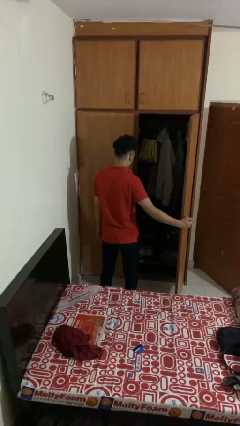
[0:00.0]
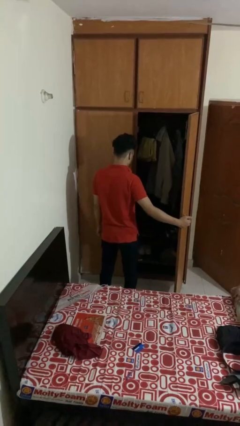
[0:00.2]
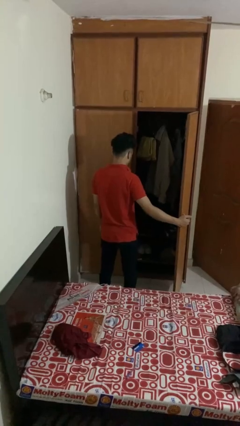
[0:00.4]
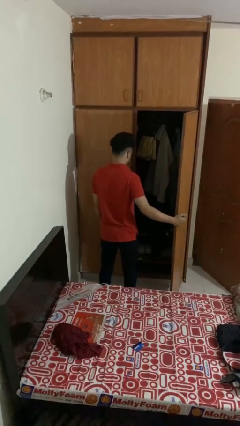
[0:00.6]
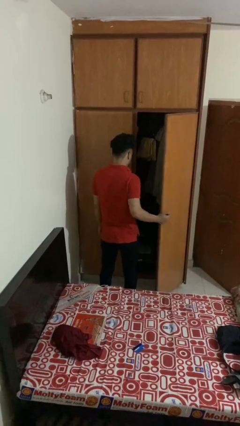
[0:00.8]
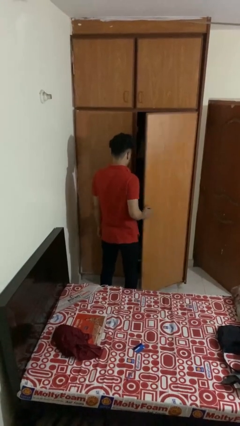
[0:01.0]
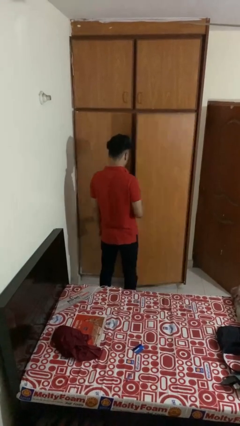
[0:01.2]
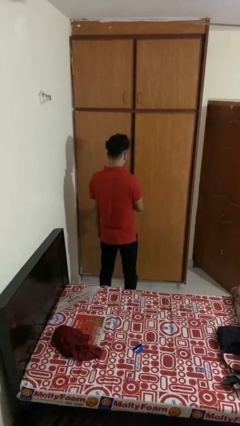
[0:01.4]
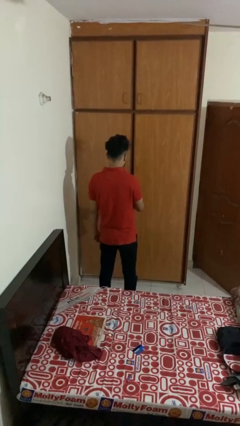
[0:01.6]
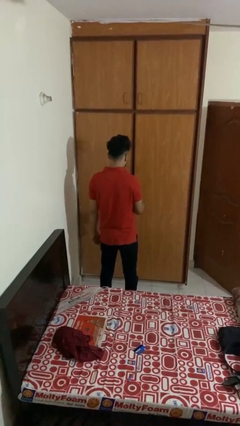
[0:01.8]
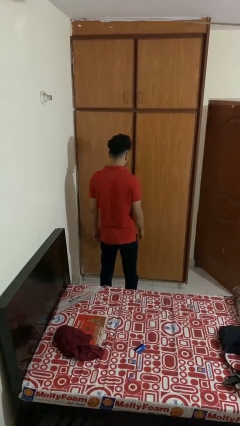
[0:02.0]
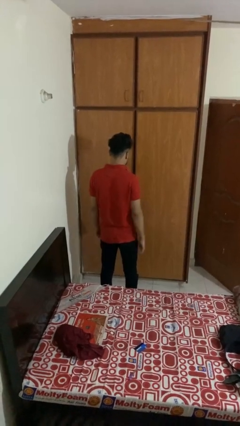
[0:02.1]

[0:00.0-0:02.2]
person closes closet door

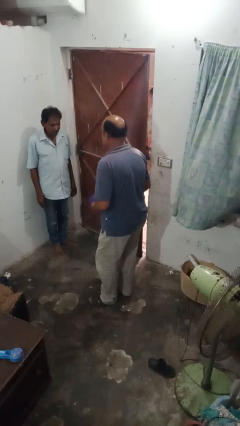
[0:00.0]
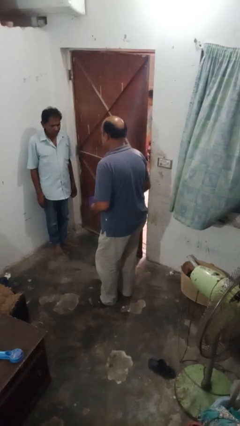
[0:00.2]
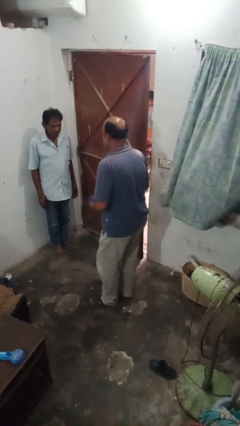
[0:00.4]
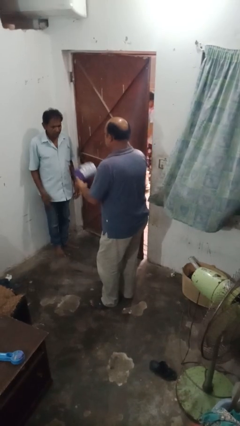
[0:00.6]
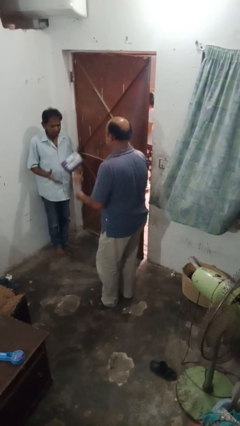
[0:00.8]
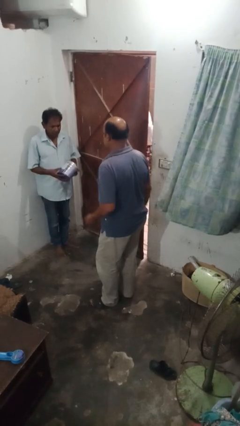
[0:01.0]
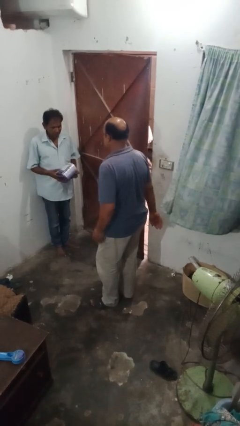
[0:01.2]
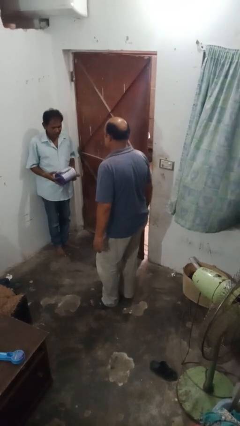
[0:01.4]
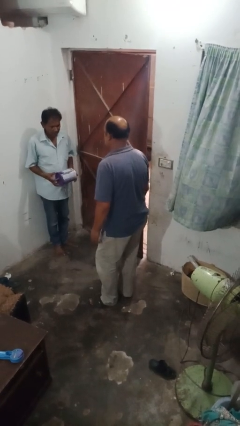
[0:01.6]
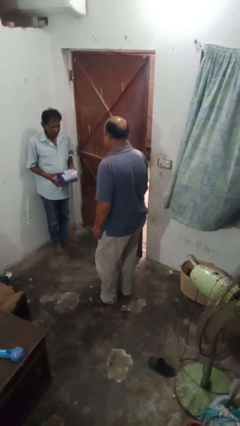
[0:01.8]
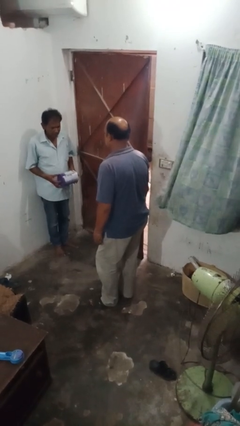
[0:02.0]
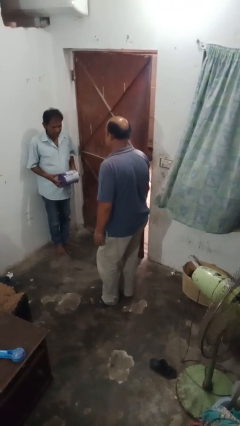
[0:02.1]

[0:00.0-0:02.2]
person throws object to person

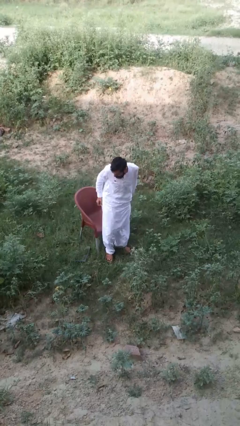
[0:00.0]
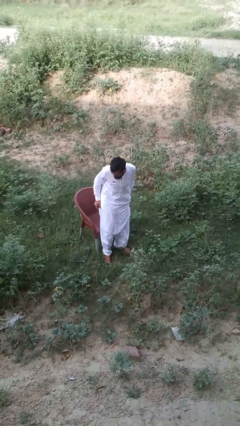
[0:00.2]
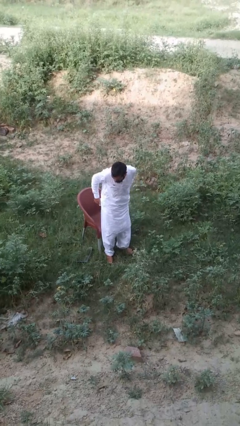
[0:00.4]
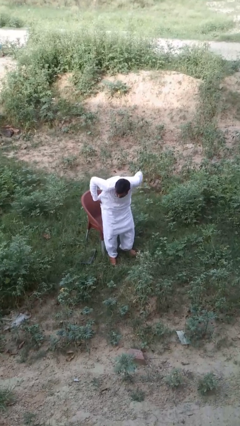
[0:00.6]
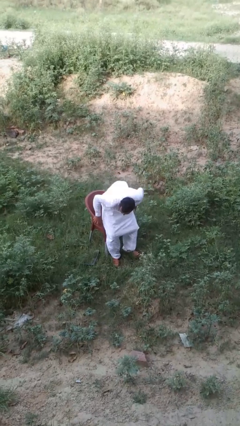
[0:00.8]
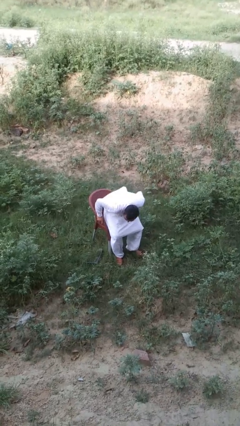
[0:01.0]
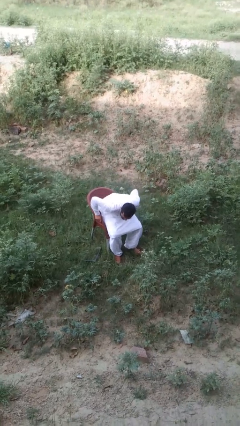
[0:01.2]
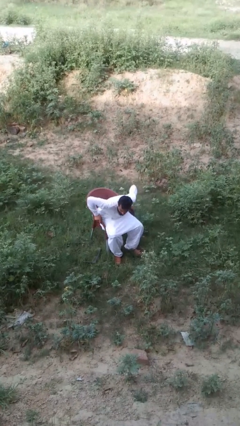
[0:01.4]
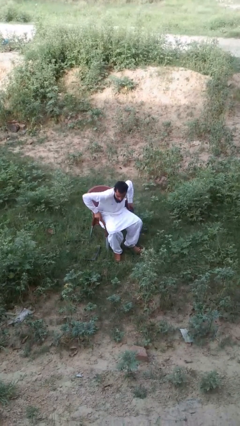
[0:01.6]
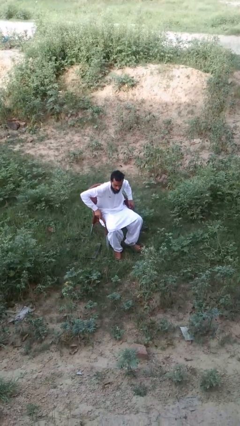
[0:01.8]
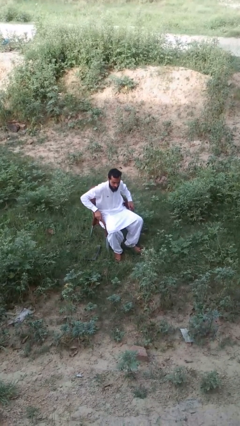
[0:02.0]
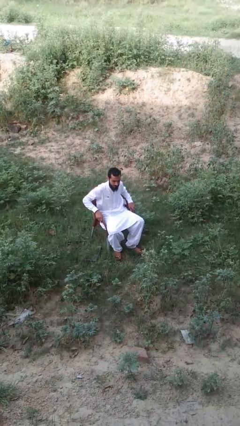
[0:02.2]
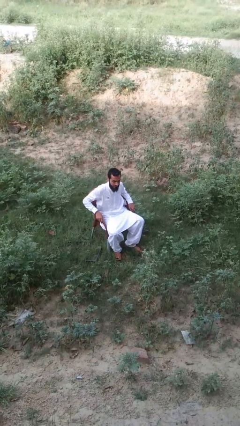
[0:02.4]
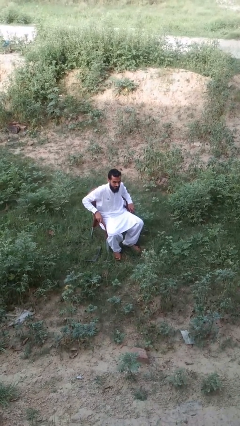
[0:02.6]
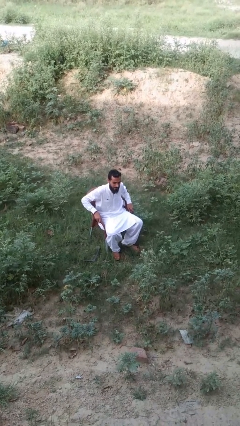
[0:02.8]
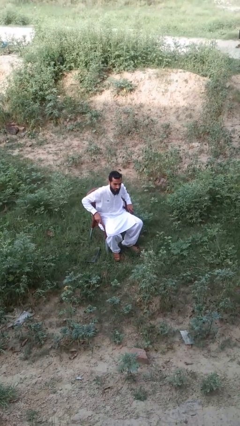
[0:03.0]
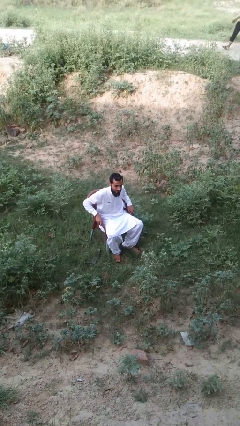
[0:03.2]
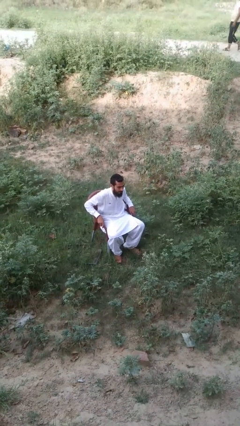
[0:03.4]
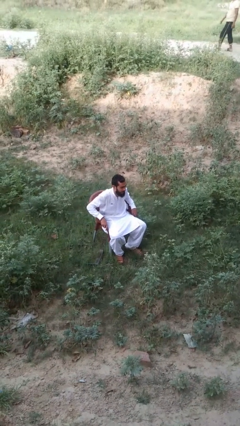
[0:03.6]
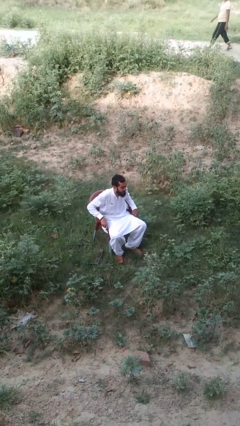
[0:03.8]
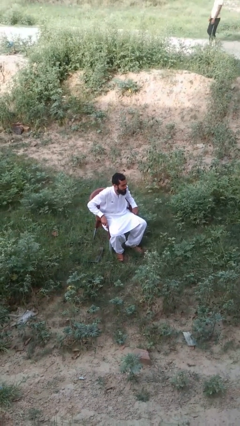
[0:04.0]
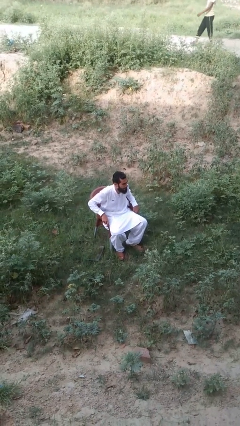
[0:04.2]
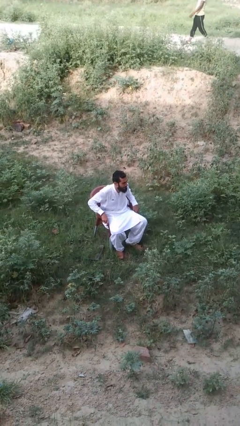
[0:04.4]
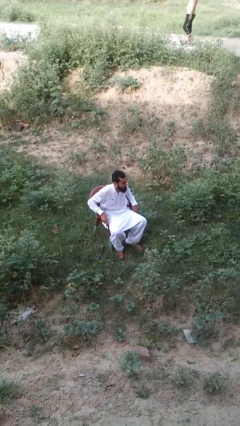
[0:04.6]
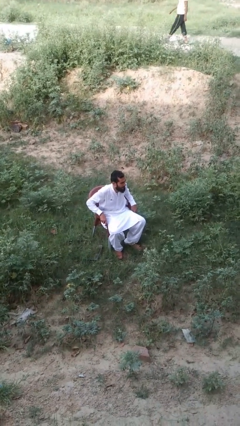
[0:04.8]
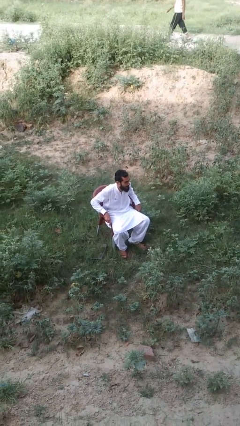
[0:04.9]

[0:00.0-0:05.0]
person sits down

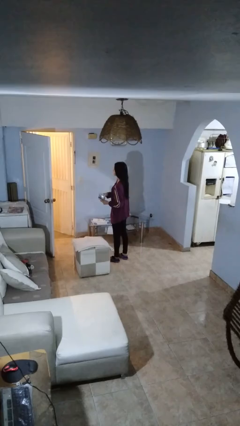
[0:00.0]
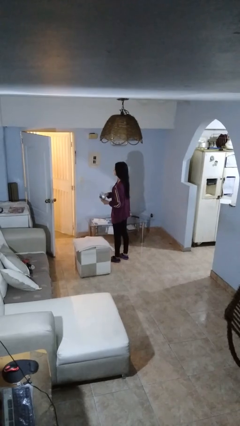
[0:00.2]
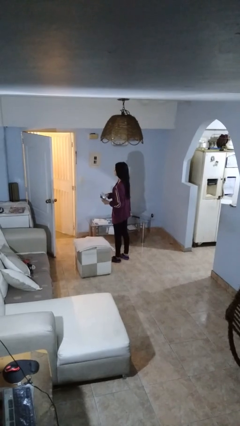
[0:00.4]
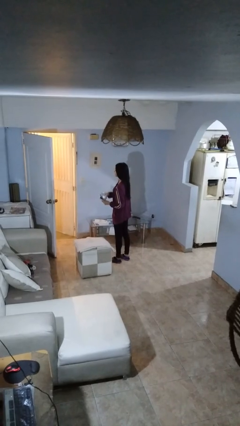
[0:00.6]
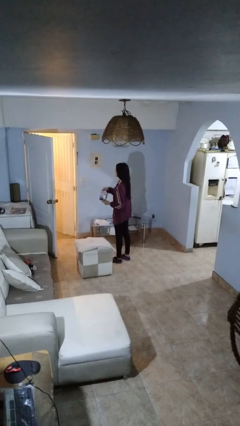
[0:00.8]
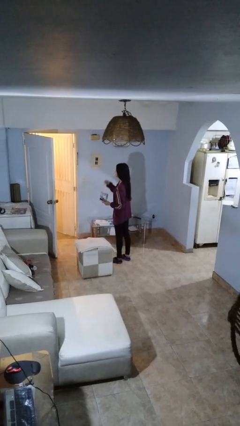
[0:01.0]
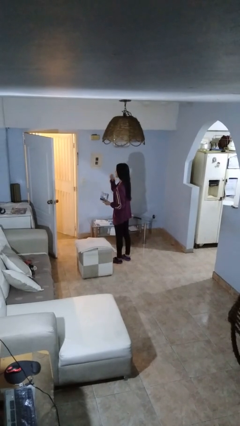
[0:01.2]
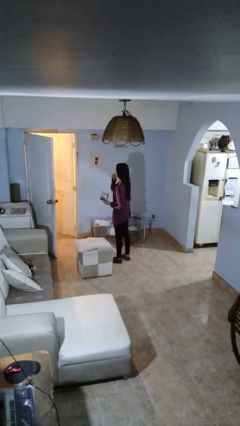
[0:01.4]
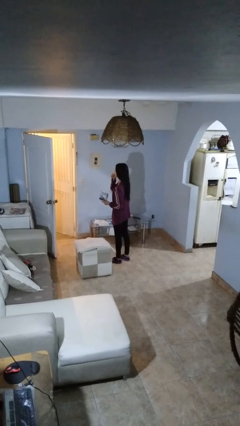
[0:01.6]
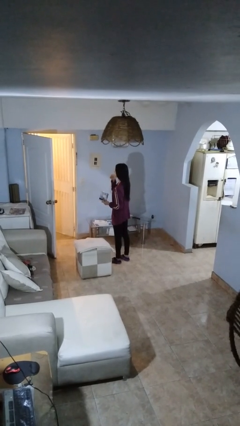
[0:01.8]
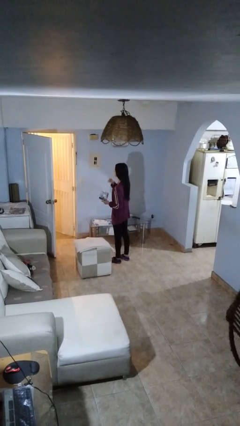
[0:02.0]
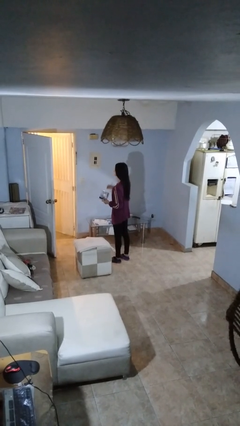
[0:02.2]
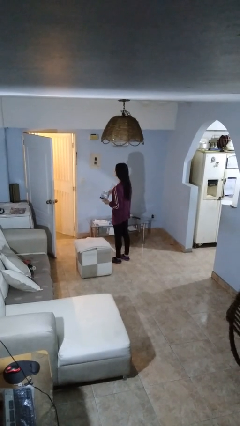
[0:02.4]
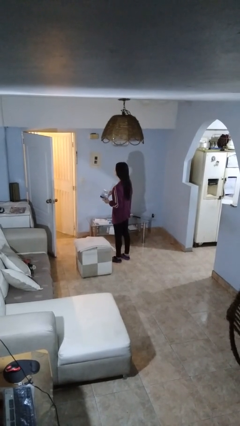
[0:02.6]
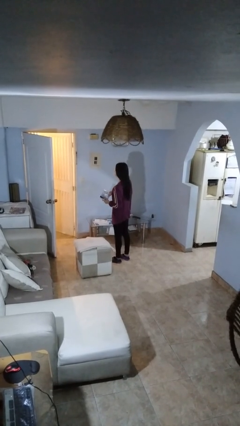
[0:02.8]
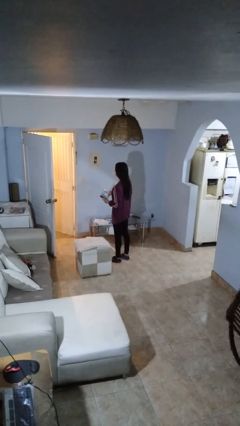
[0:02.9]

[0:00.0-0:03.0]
person eats snack from bag

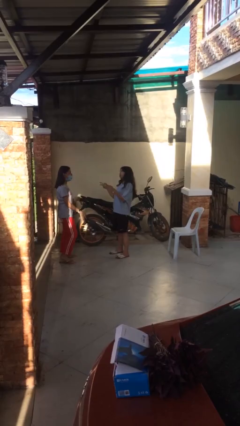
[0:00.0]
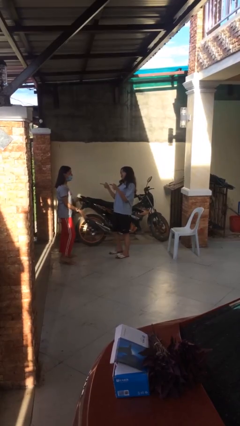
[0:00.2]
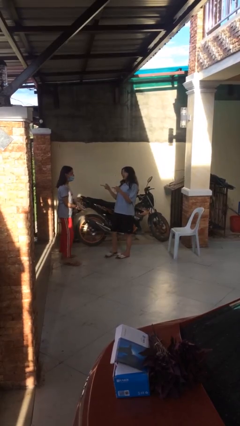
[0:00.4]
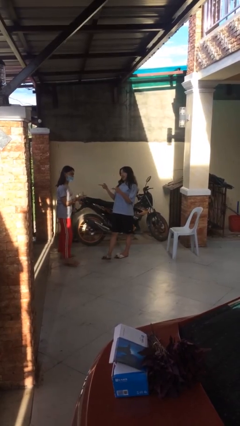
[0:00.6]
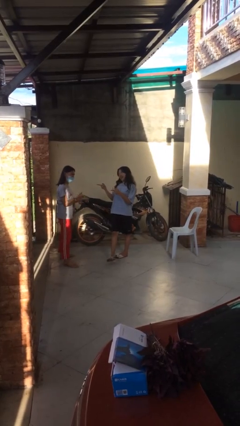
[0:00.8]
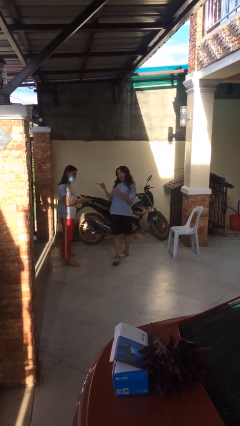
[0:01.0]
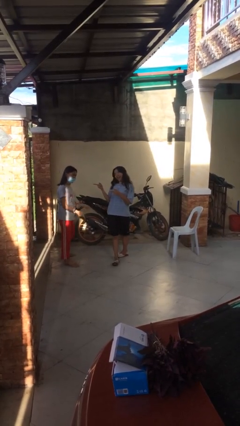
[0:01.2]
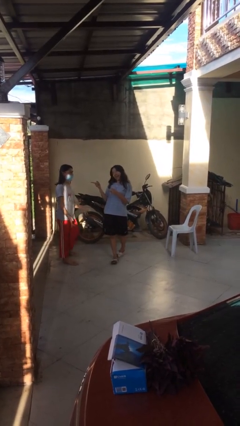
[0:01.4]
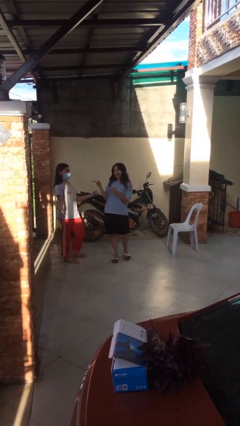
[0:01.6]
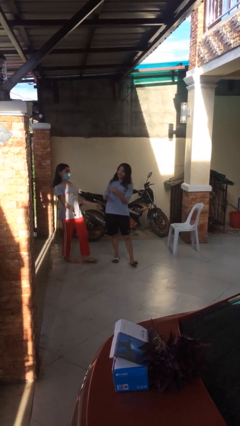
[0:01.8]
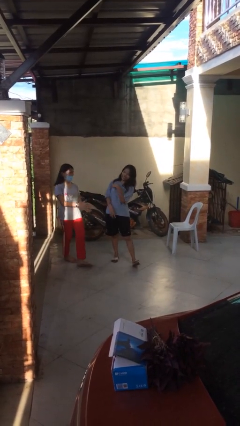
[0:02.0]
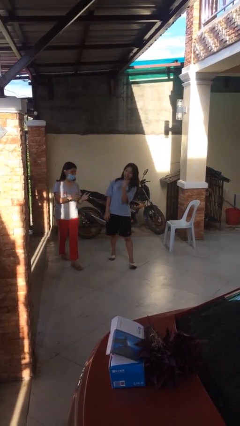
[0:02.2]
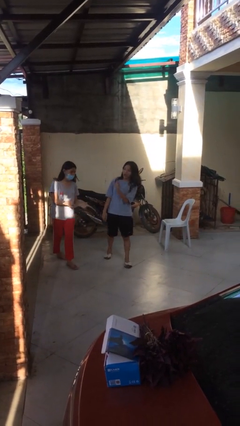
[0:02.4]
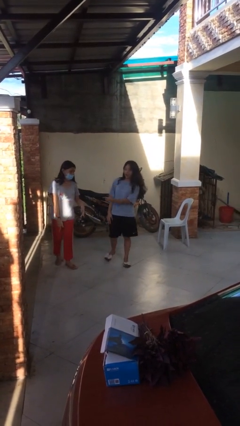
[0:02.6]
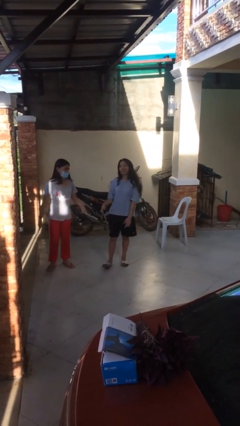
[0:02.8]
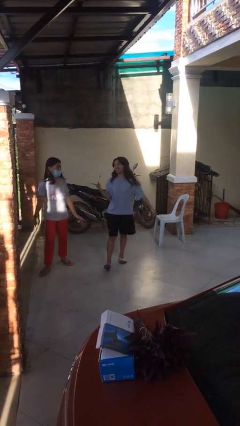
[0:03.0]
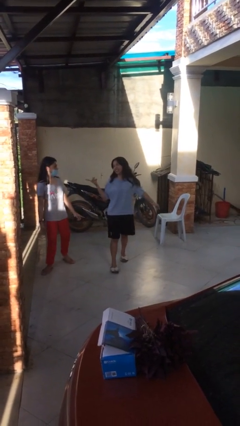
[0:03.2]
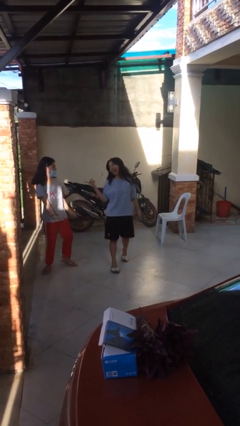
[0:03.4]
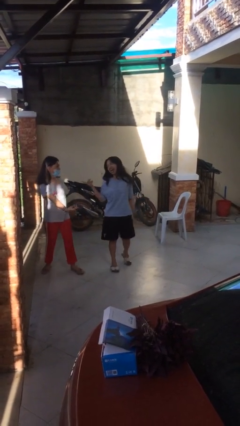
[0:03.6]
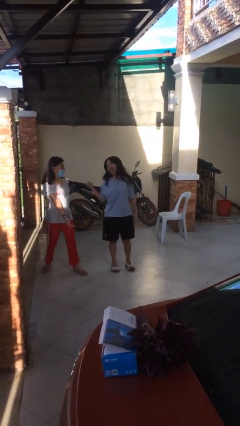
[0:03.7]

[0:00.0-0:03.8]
person talks to person

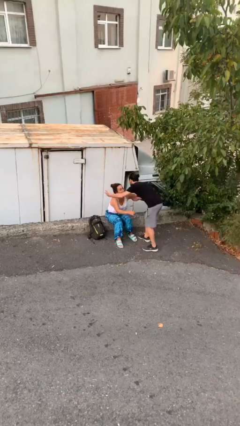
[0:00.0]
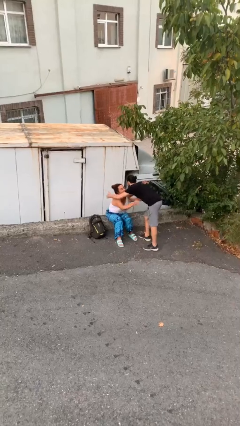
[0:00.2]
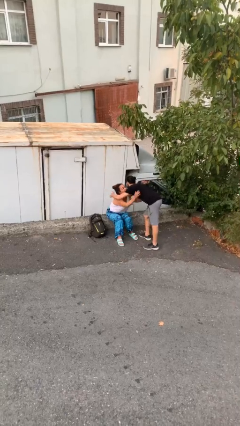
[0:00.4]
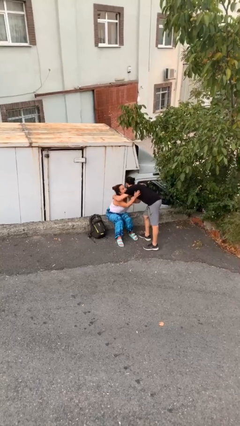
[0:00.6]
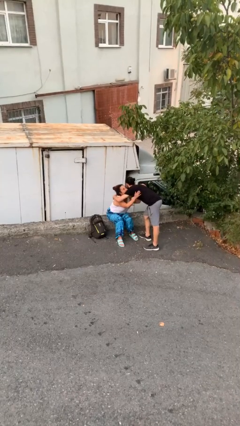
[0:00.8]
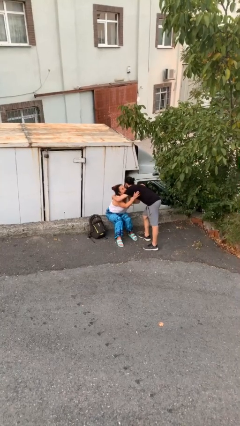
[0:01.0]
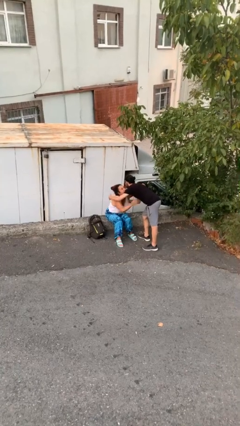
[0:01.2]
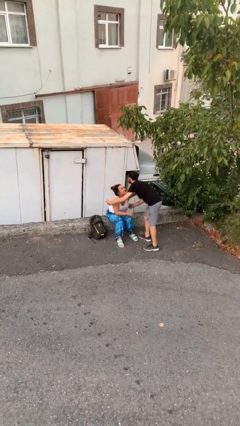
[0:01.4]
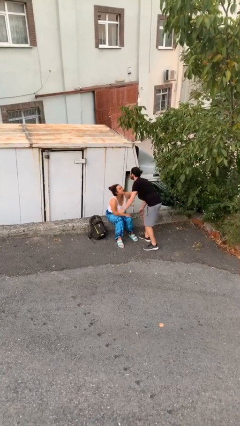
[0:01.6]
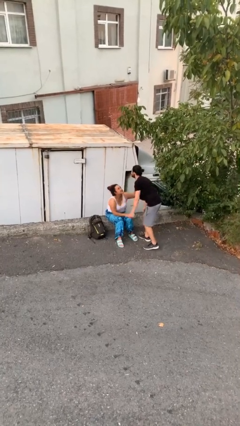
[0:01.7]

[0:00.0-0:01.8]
person embraces person
